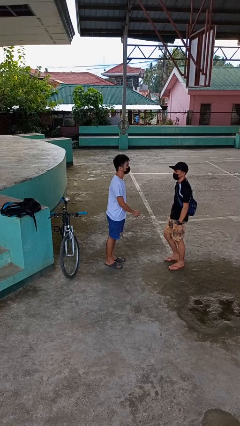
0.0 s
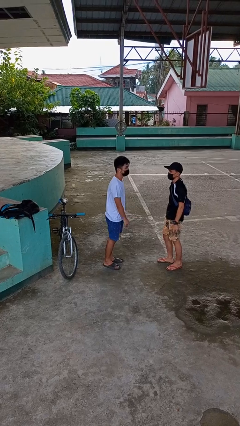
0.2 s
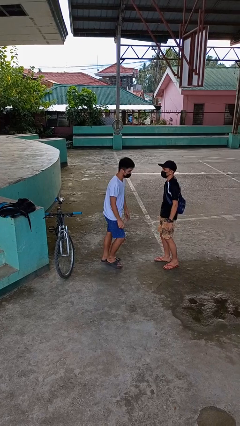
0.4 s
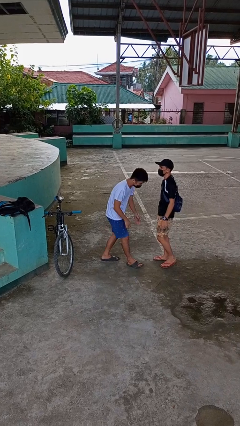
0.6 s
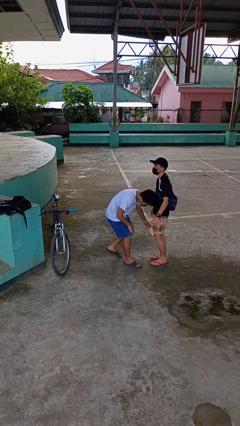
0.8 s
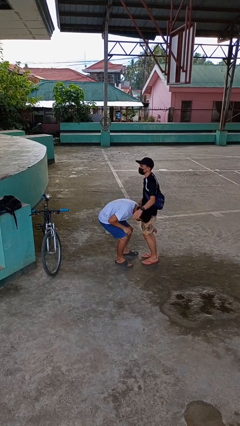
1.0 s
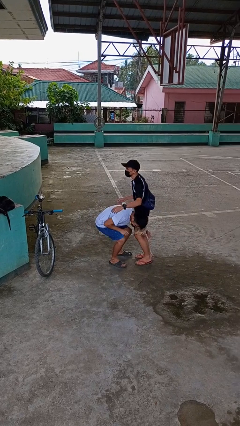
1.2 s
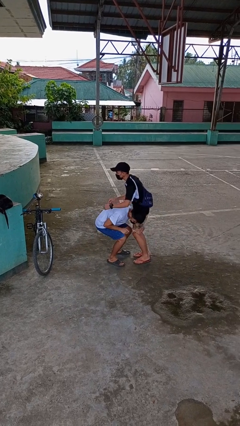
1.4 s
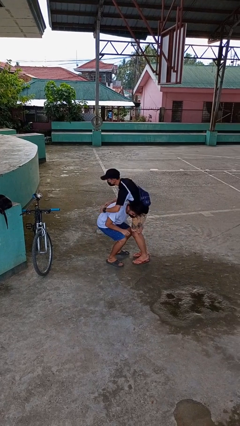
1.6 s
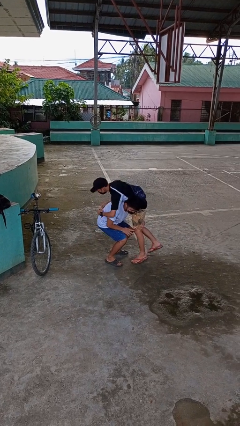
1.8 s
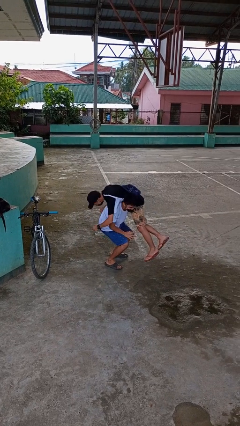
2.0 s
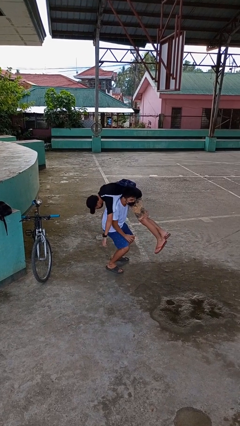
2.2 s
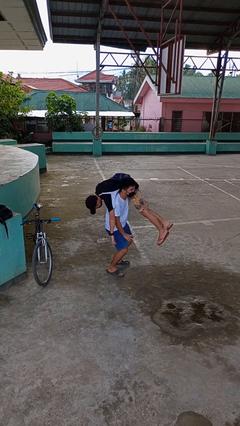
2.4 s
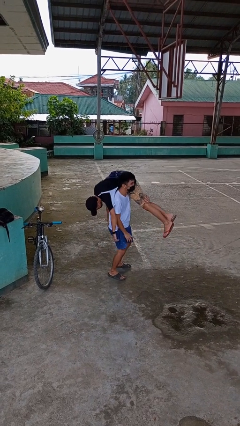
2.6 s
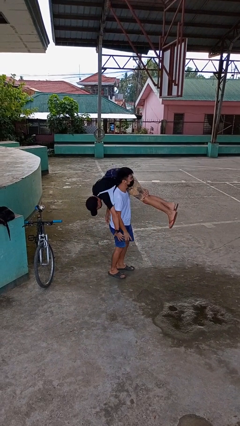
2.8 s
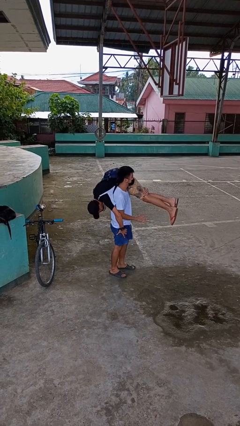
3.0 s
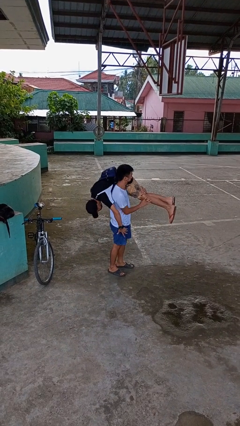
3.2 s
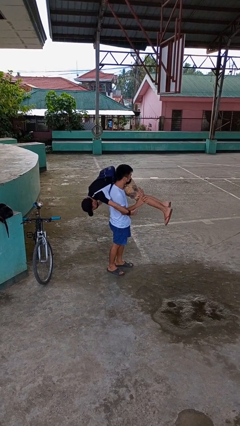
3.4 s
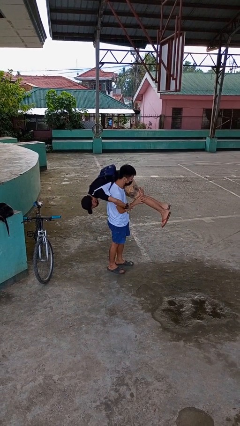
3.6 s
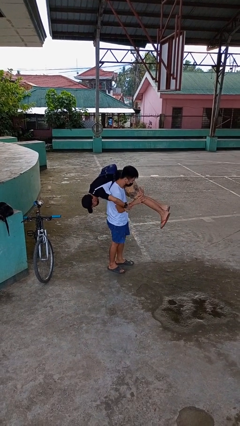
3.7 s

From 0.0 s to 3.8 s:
person carries person over shoulder

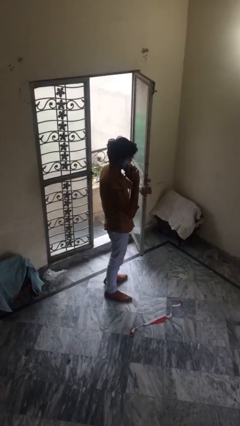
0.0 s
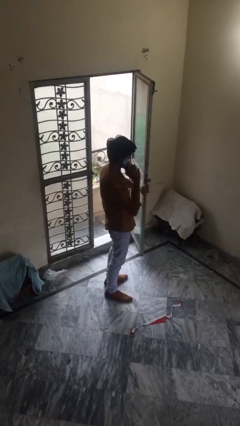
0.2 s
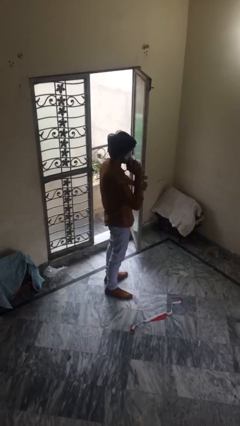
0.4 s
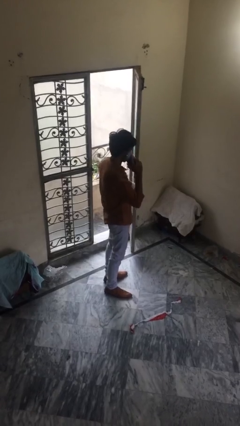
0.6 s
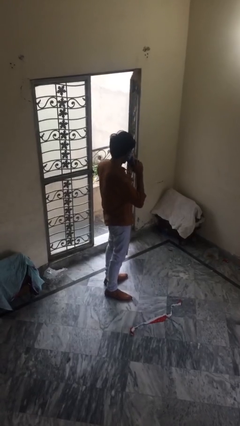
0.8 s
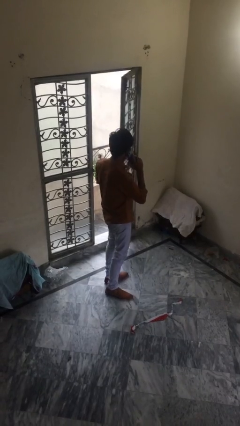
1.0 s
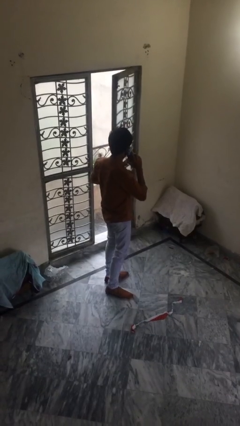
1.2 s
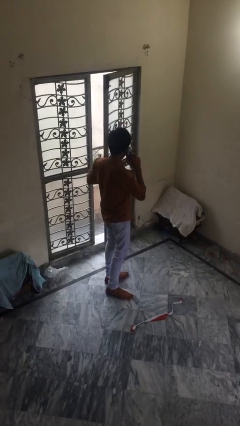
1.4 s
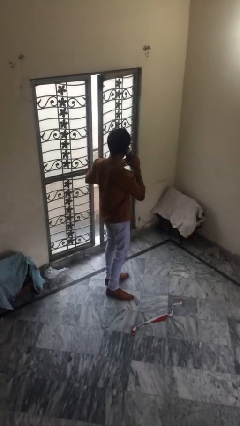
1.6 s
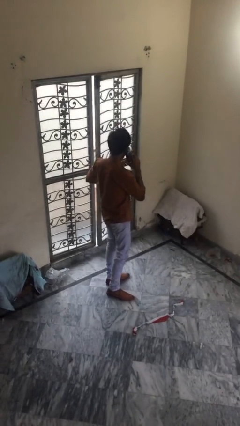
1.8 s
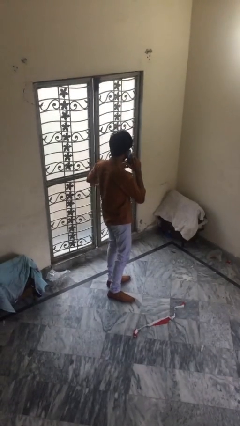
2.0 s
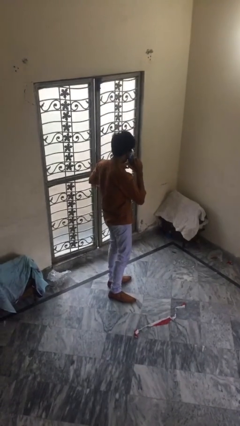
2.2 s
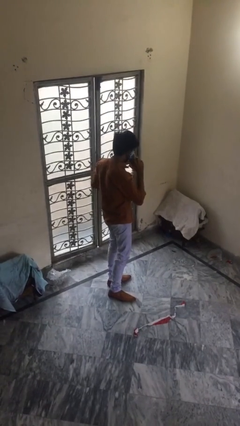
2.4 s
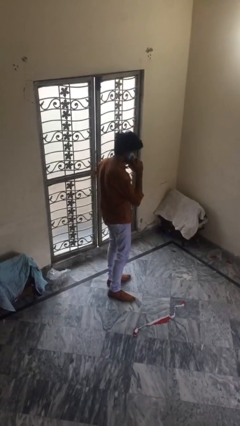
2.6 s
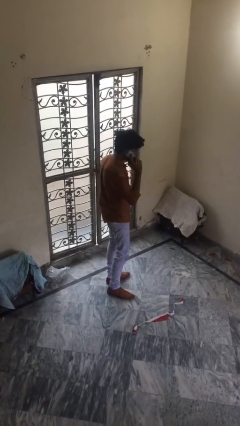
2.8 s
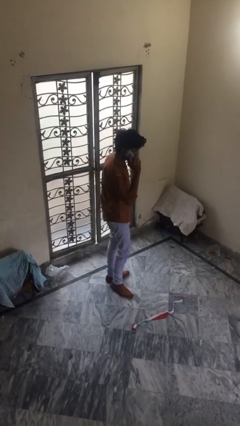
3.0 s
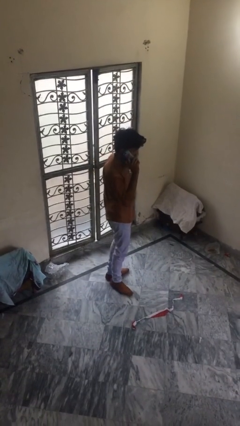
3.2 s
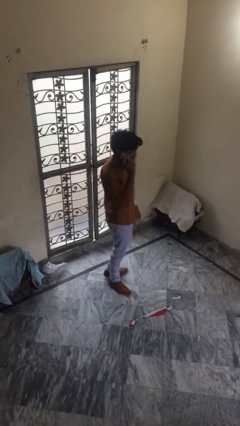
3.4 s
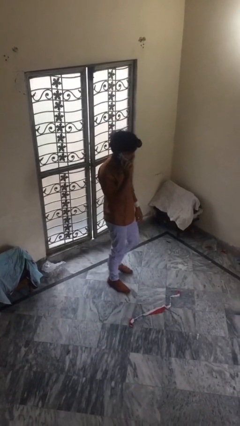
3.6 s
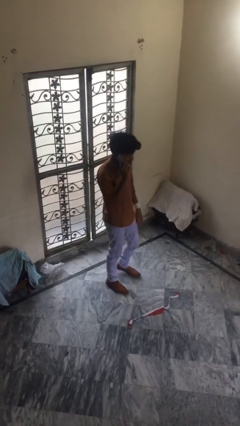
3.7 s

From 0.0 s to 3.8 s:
person closes facility door

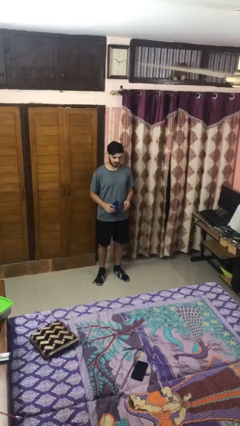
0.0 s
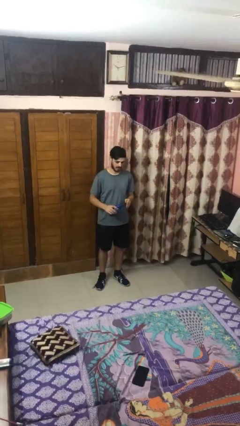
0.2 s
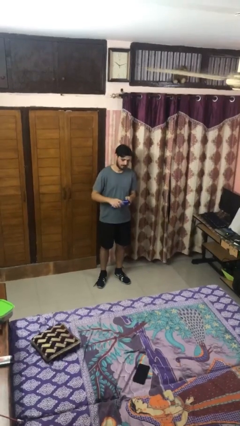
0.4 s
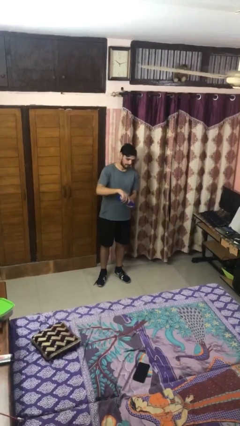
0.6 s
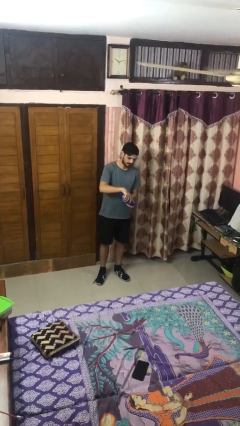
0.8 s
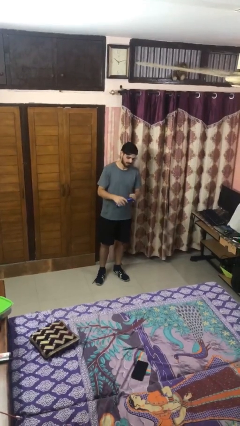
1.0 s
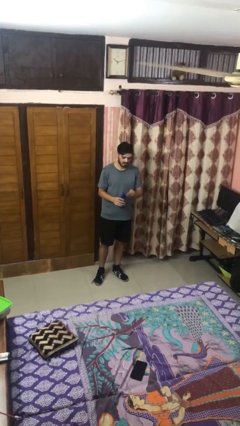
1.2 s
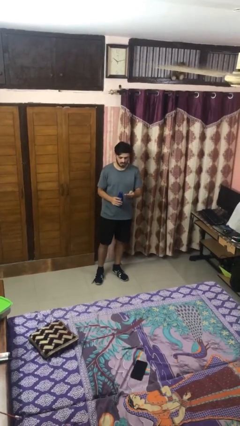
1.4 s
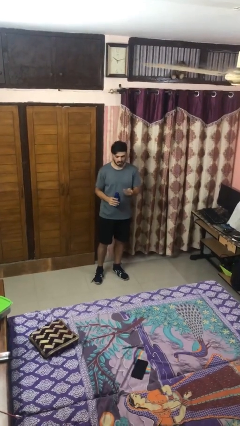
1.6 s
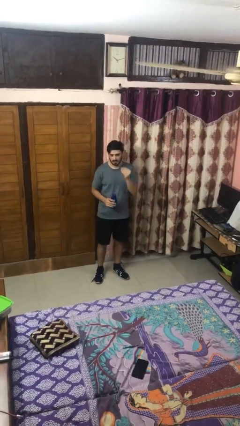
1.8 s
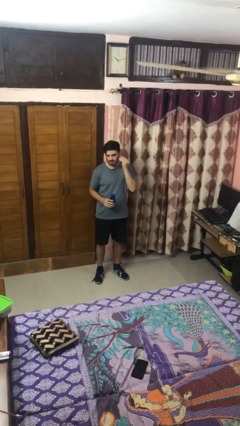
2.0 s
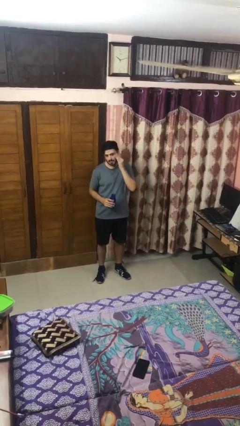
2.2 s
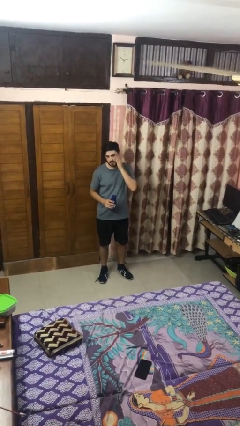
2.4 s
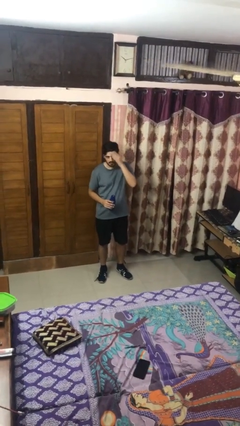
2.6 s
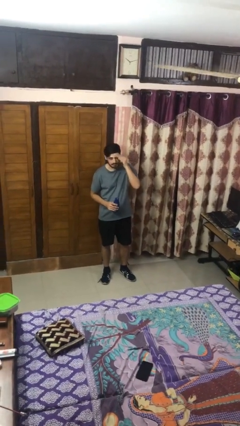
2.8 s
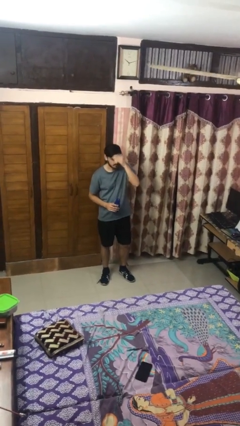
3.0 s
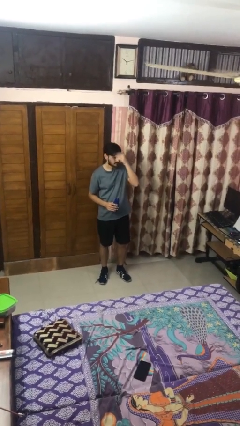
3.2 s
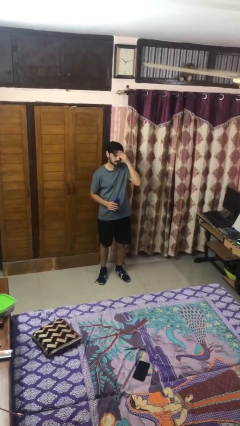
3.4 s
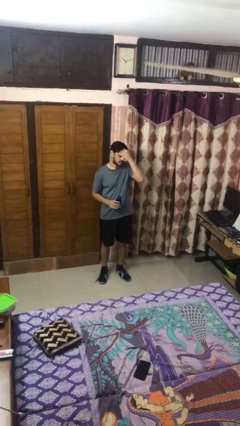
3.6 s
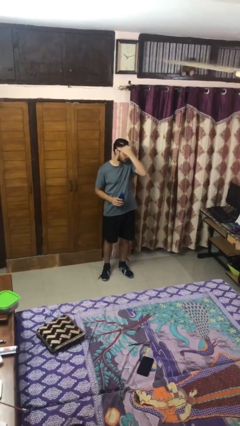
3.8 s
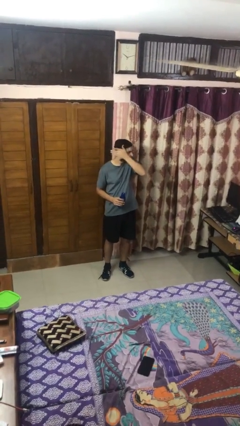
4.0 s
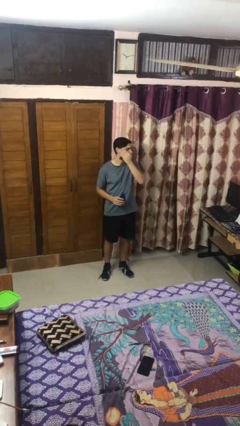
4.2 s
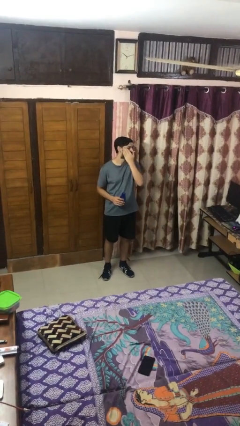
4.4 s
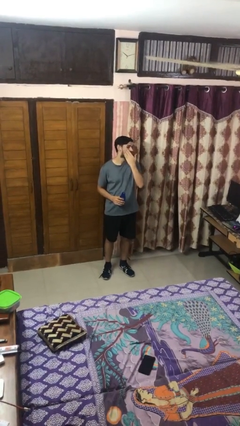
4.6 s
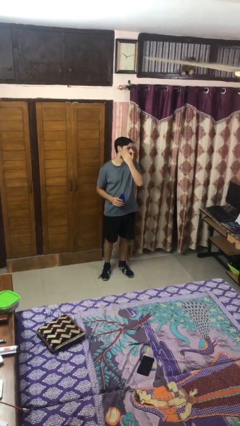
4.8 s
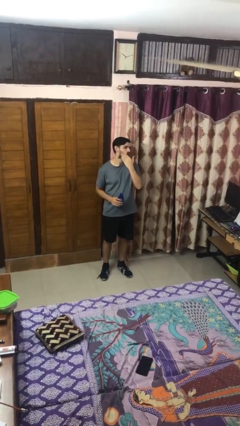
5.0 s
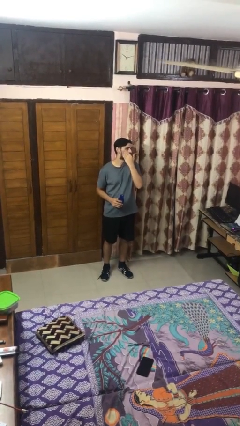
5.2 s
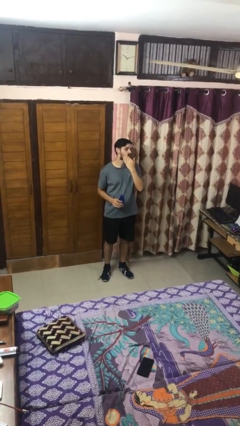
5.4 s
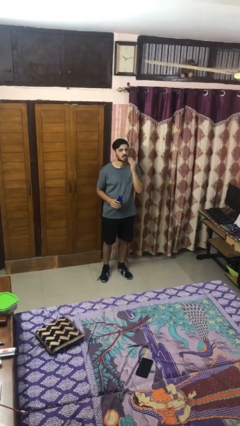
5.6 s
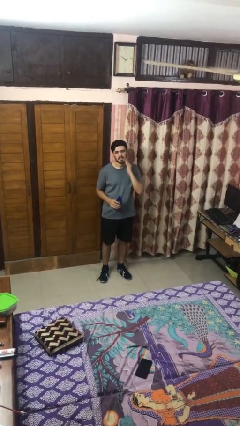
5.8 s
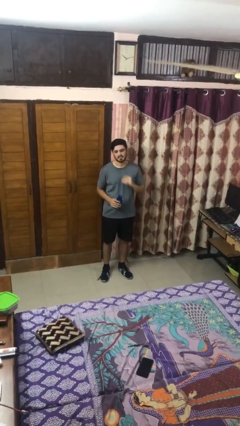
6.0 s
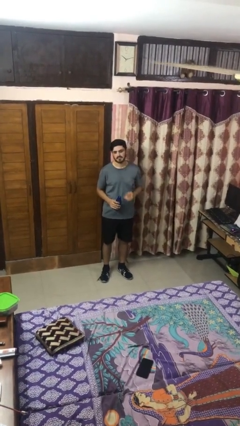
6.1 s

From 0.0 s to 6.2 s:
person applies facial moisturizer

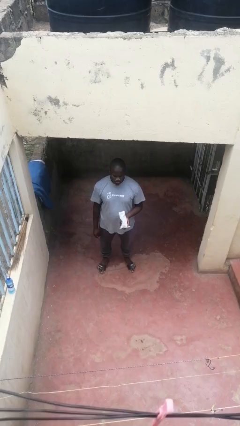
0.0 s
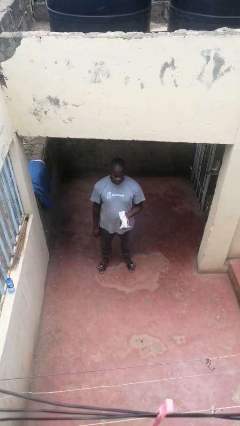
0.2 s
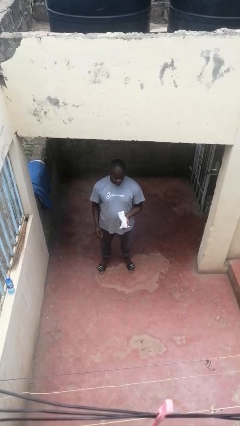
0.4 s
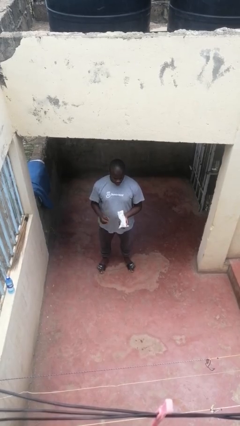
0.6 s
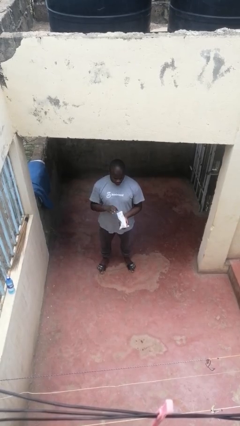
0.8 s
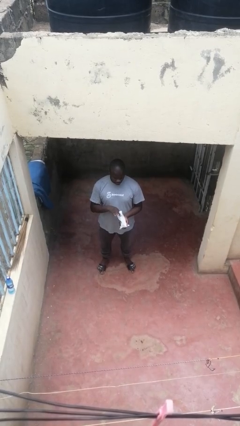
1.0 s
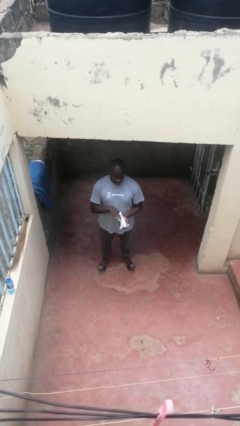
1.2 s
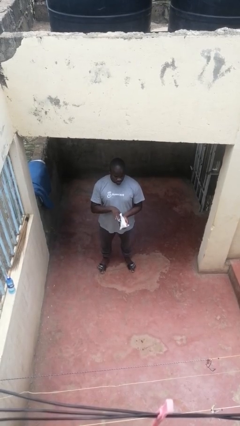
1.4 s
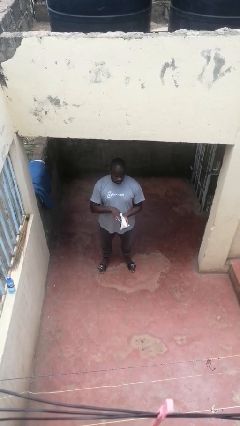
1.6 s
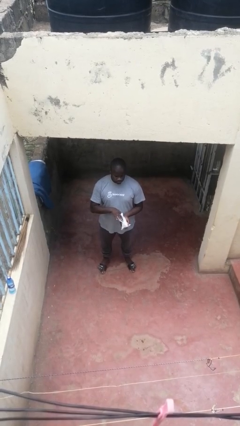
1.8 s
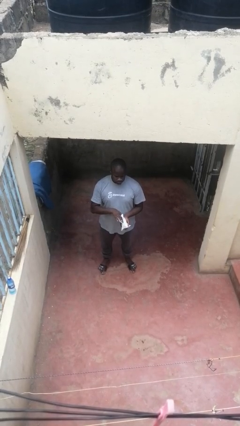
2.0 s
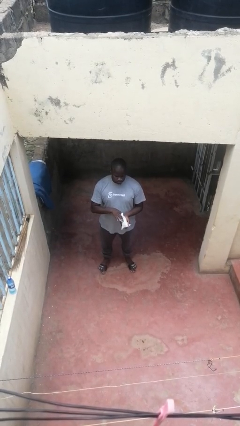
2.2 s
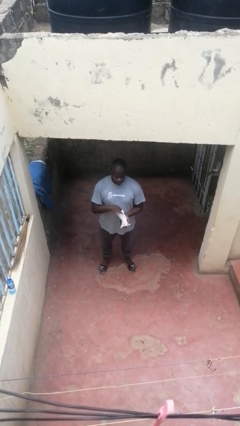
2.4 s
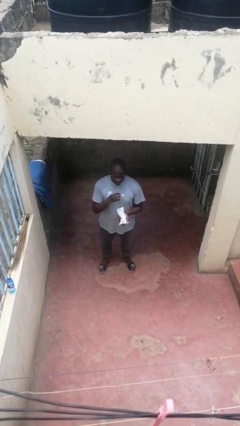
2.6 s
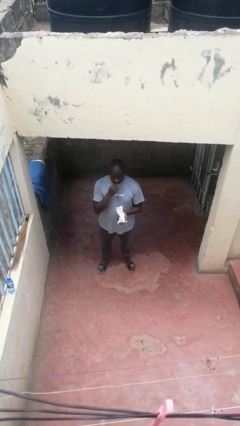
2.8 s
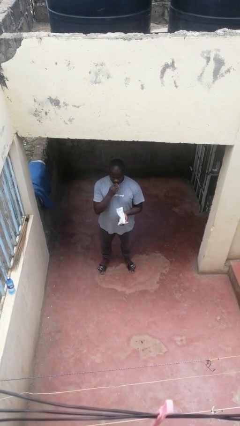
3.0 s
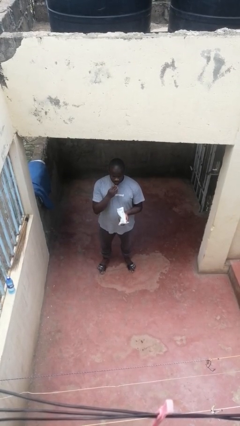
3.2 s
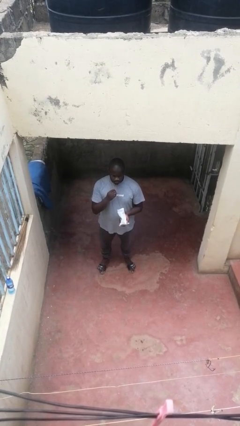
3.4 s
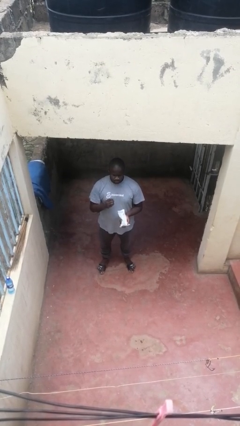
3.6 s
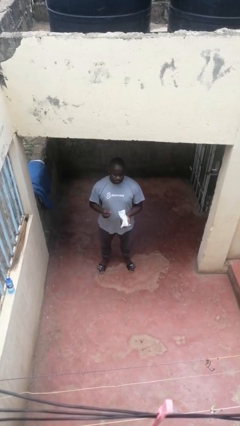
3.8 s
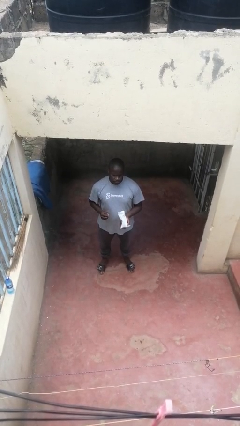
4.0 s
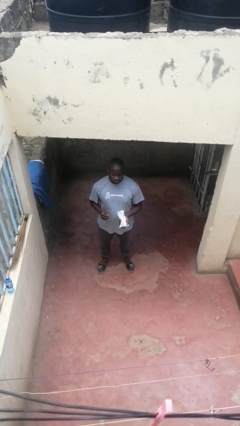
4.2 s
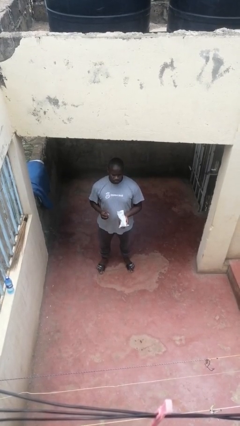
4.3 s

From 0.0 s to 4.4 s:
person eats snack from bag
